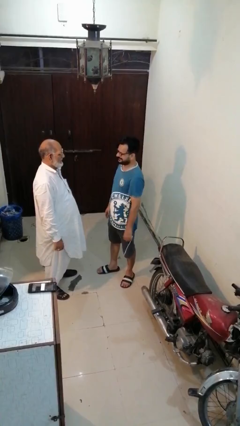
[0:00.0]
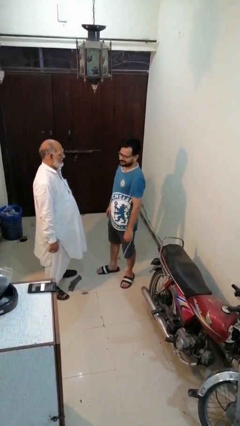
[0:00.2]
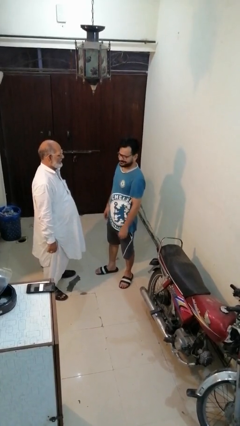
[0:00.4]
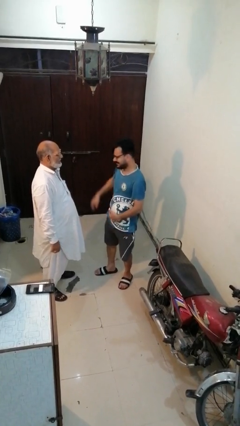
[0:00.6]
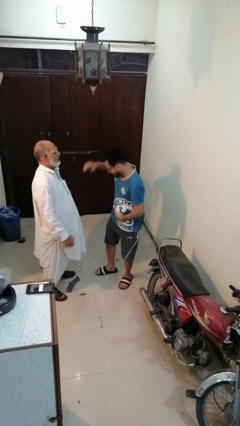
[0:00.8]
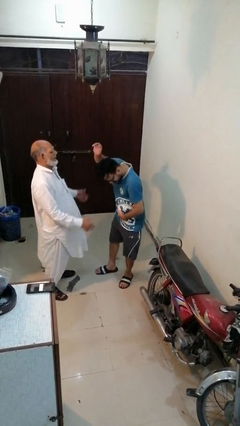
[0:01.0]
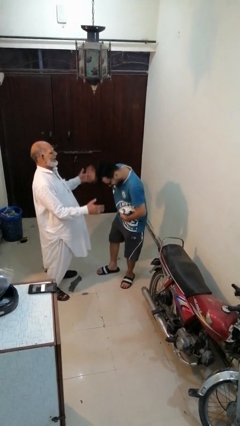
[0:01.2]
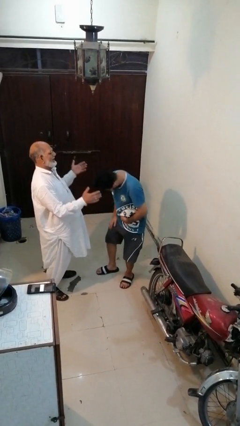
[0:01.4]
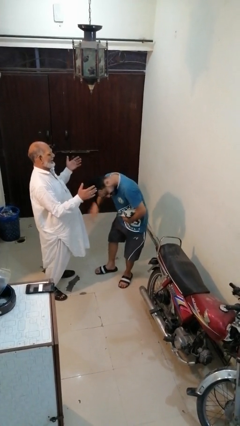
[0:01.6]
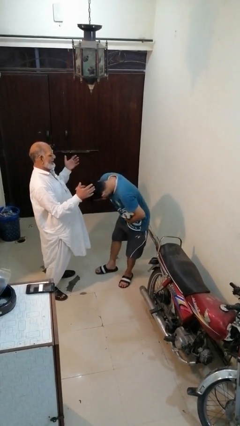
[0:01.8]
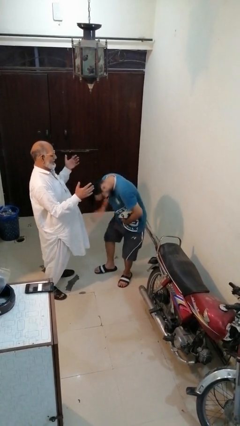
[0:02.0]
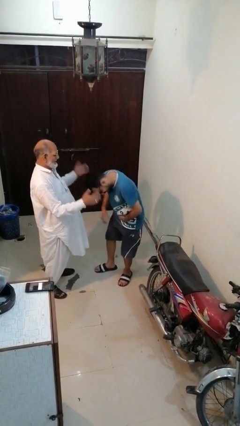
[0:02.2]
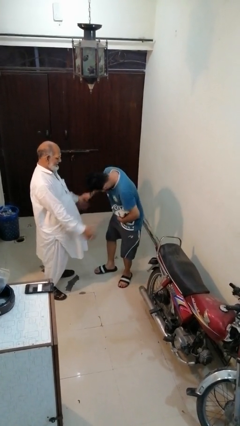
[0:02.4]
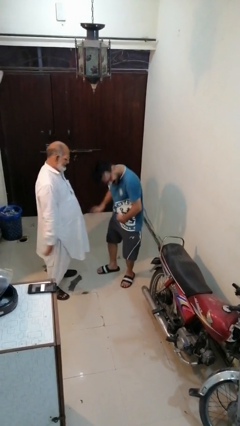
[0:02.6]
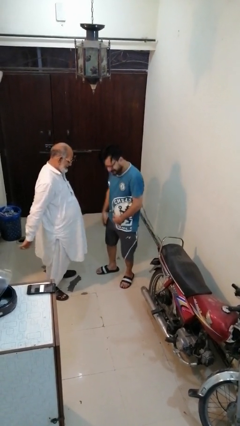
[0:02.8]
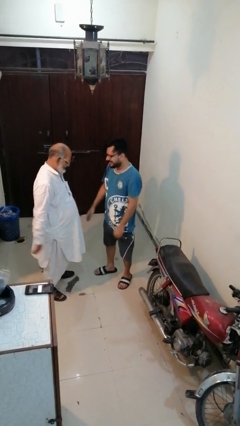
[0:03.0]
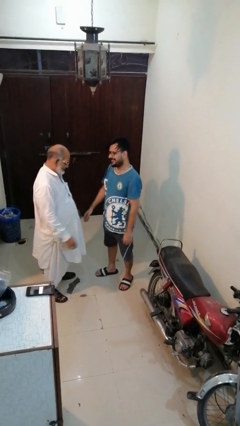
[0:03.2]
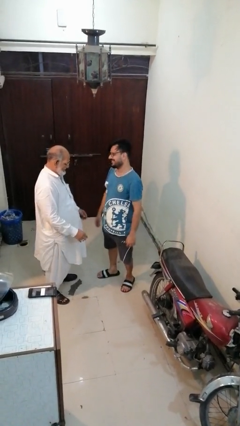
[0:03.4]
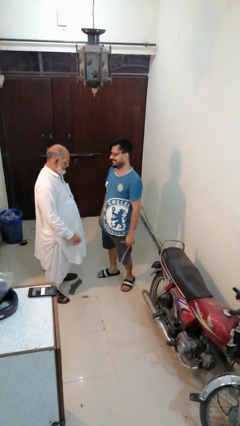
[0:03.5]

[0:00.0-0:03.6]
person laughs with person

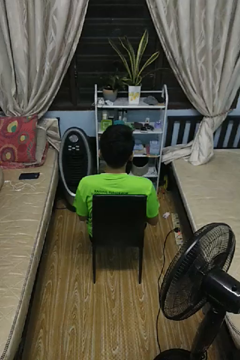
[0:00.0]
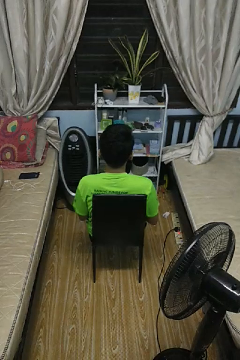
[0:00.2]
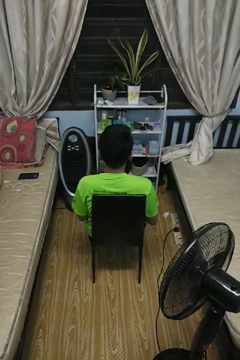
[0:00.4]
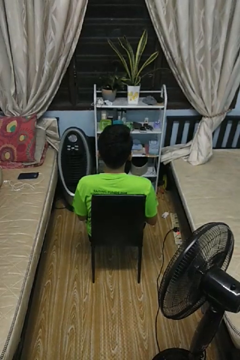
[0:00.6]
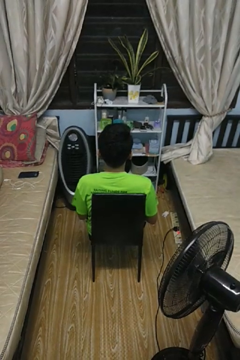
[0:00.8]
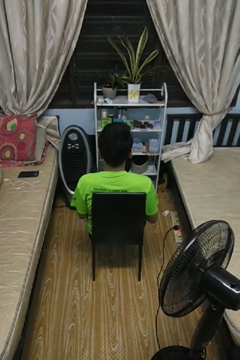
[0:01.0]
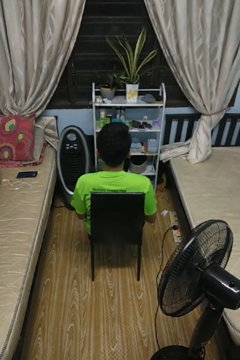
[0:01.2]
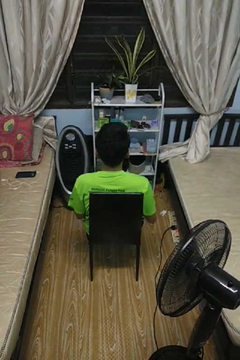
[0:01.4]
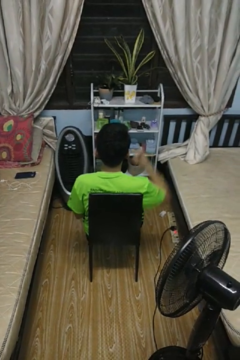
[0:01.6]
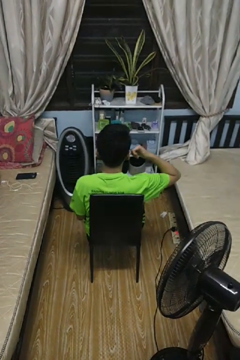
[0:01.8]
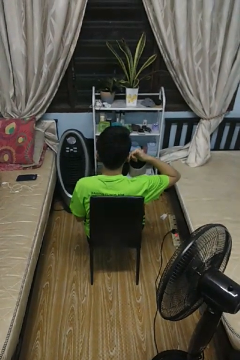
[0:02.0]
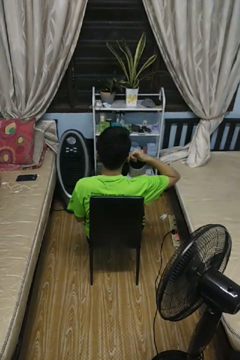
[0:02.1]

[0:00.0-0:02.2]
person gestures call me

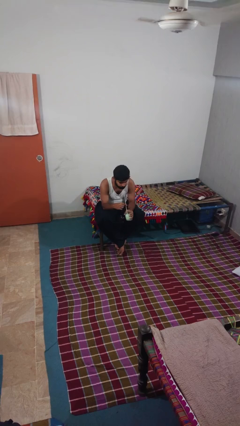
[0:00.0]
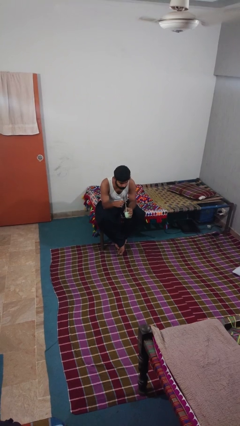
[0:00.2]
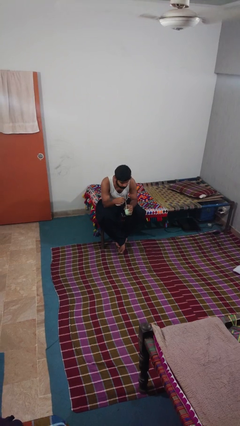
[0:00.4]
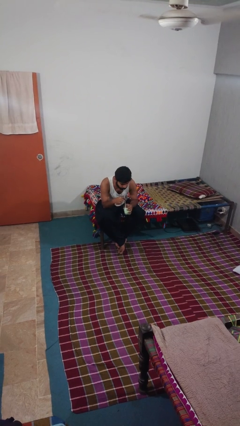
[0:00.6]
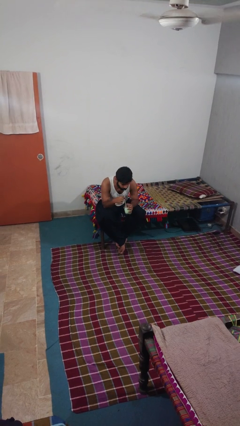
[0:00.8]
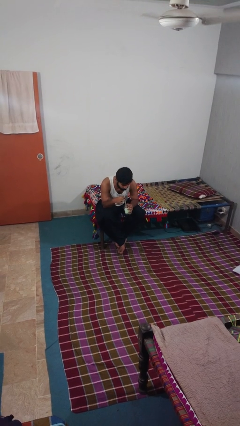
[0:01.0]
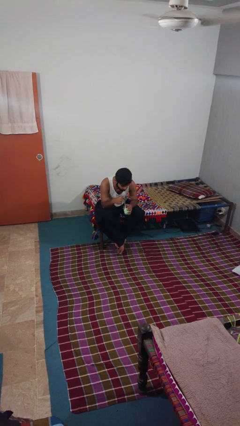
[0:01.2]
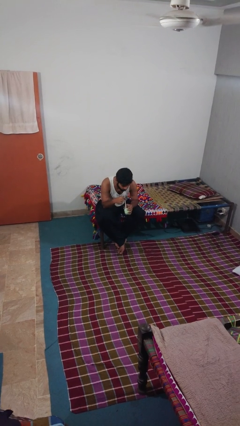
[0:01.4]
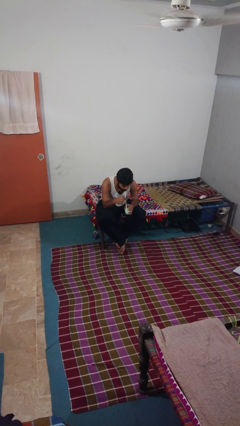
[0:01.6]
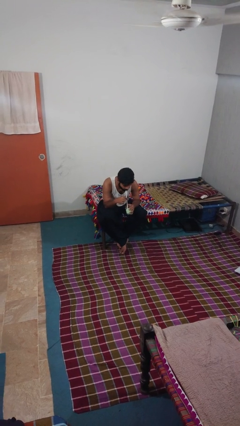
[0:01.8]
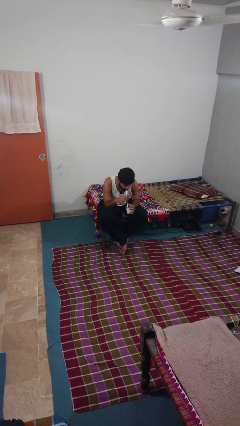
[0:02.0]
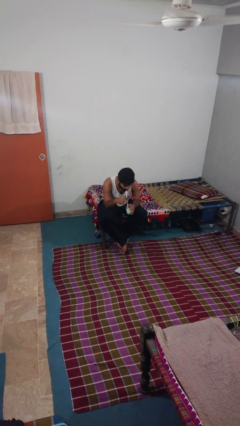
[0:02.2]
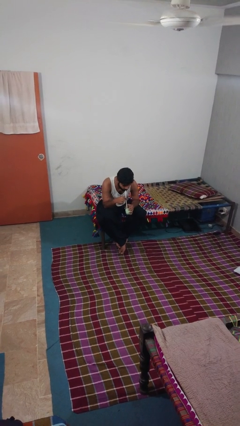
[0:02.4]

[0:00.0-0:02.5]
person drinks from straw

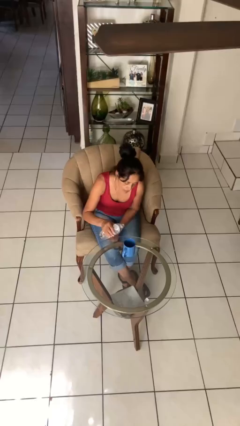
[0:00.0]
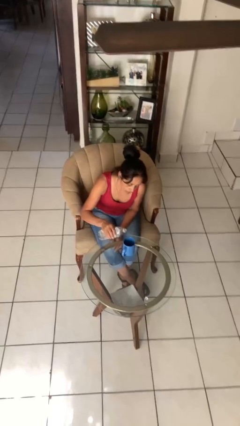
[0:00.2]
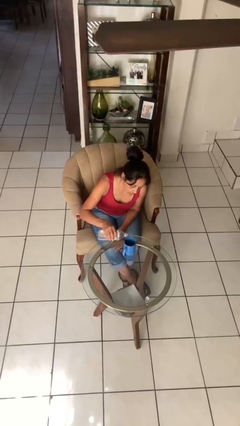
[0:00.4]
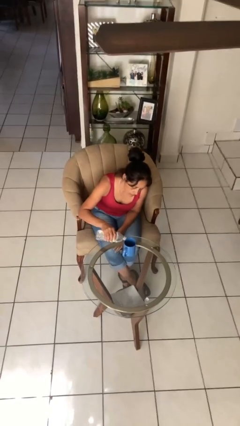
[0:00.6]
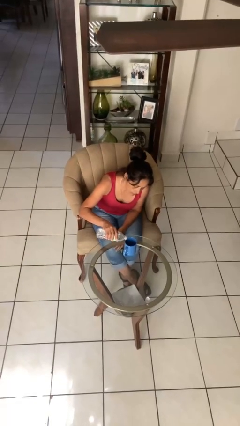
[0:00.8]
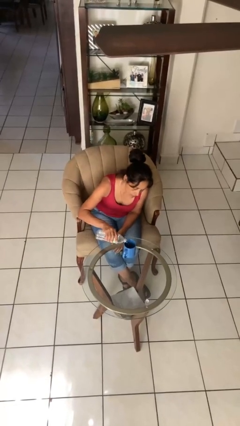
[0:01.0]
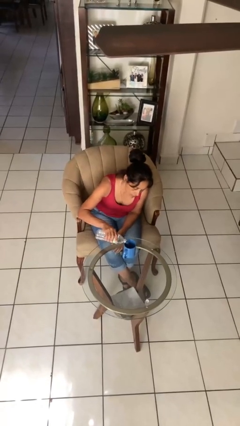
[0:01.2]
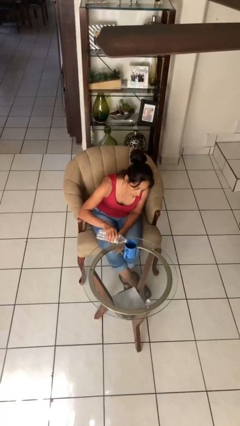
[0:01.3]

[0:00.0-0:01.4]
person pours liquid into cup

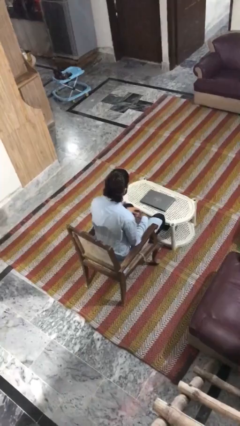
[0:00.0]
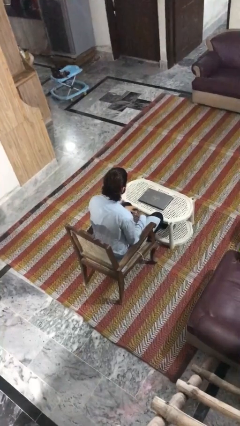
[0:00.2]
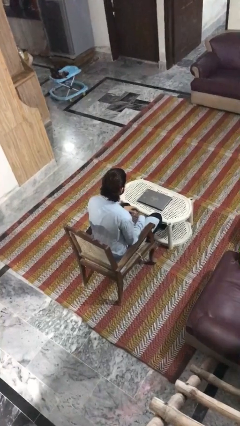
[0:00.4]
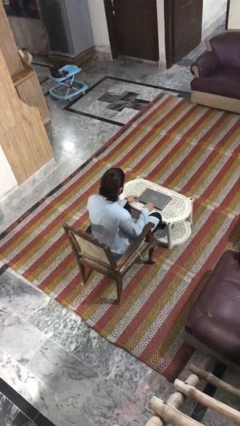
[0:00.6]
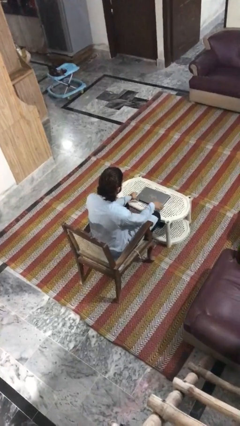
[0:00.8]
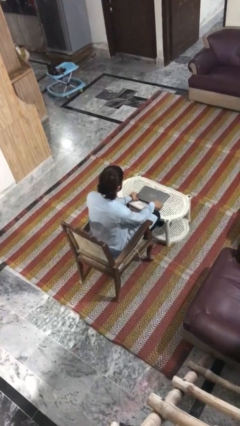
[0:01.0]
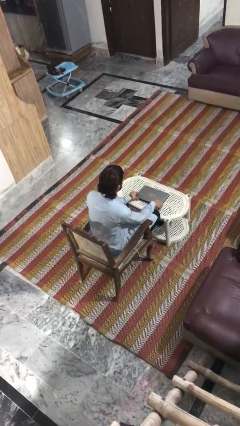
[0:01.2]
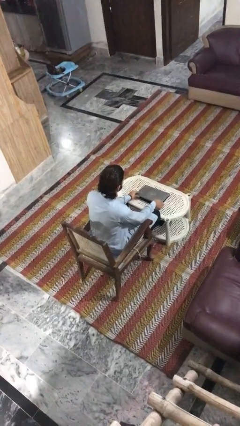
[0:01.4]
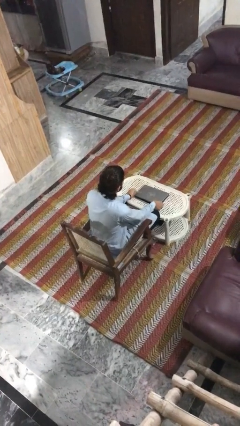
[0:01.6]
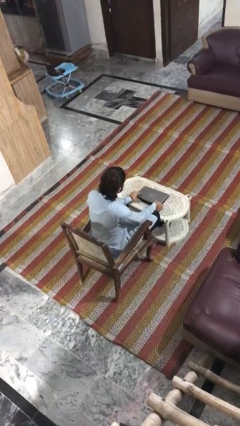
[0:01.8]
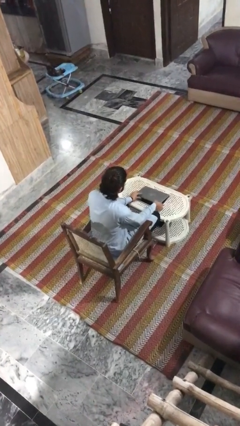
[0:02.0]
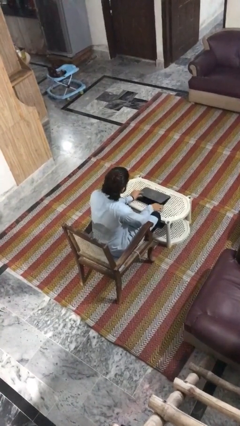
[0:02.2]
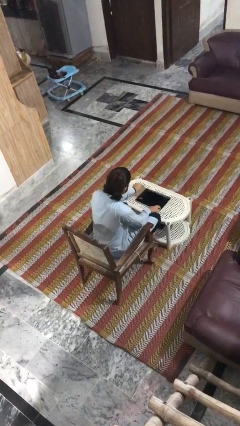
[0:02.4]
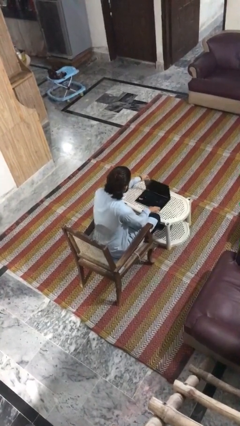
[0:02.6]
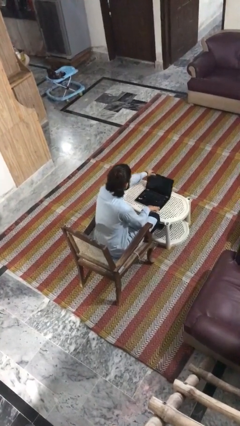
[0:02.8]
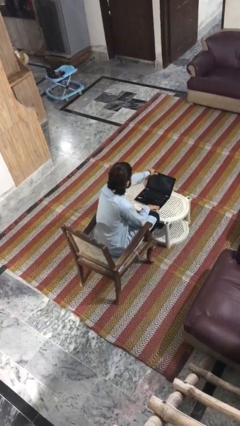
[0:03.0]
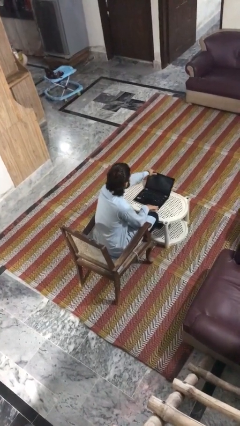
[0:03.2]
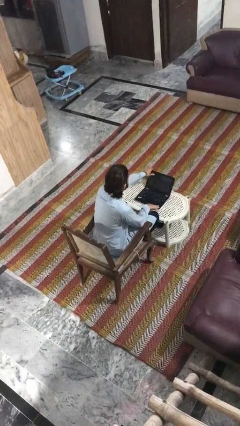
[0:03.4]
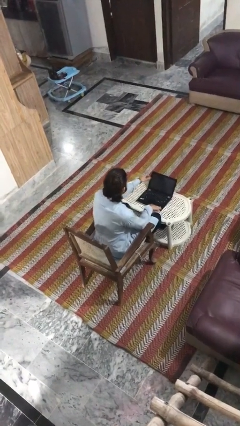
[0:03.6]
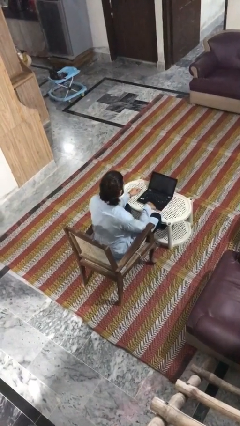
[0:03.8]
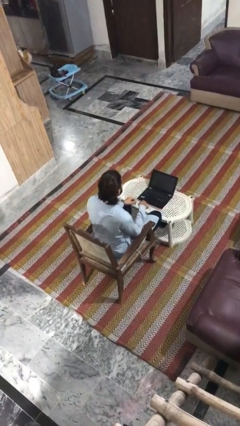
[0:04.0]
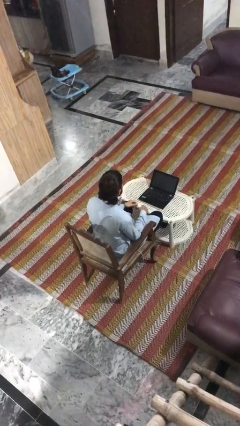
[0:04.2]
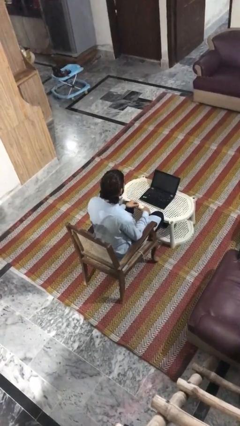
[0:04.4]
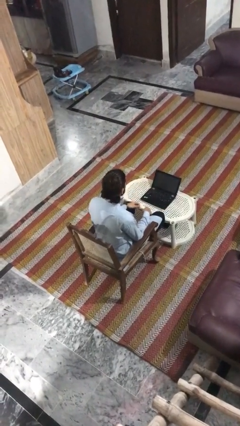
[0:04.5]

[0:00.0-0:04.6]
person opens laptop

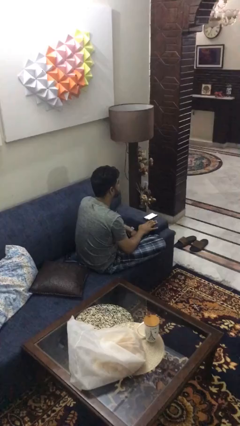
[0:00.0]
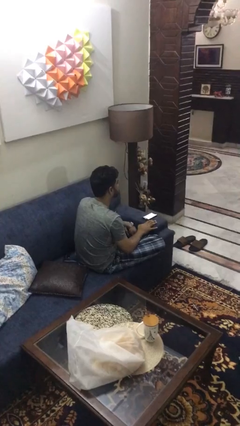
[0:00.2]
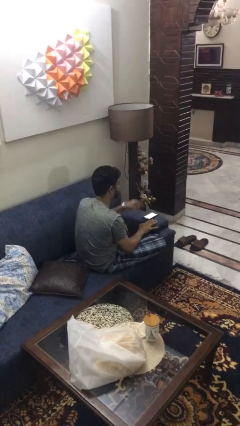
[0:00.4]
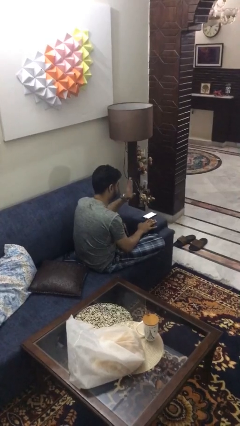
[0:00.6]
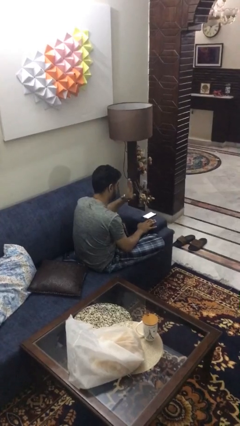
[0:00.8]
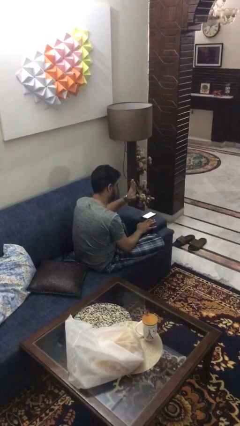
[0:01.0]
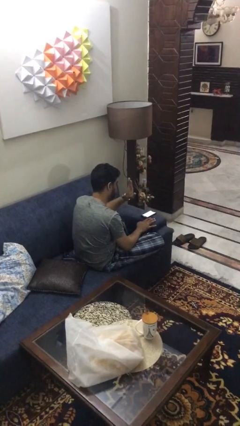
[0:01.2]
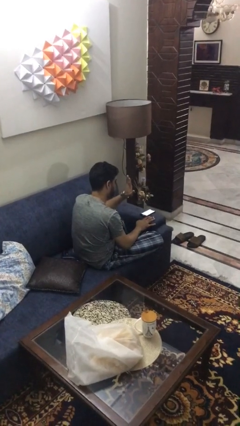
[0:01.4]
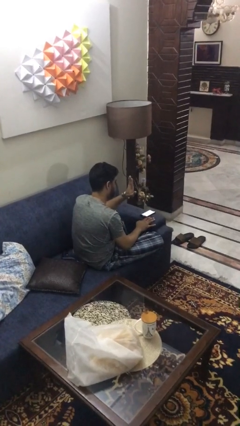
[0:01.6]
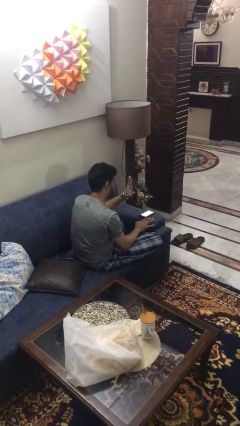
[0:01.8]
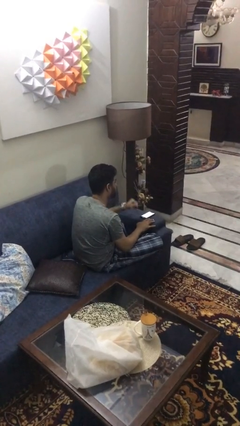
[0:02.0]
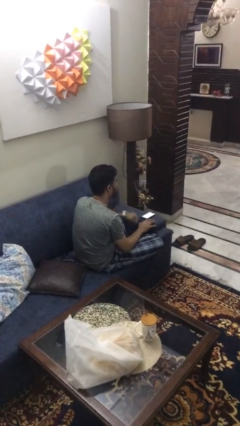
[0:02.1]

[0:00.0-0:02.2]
person gestures stop

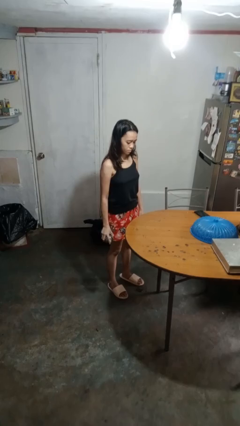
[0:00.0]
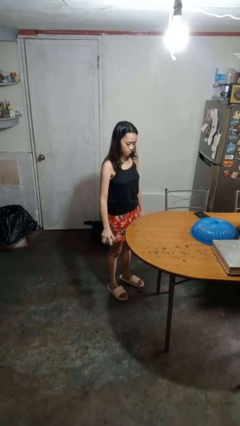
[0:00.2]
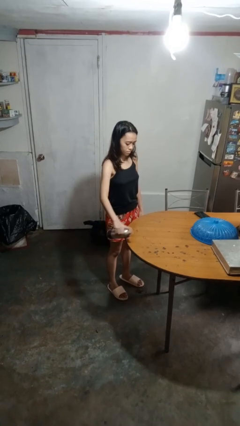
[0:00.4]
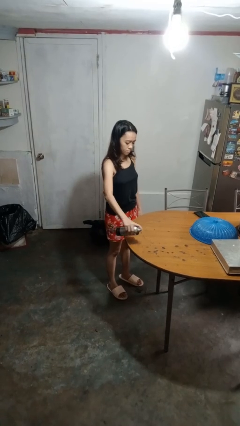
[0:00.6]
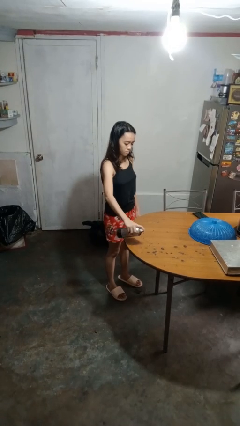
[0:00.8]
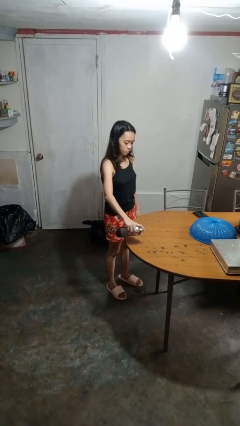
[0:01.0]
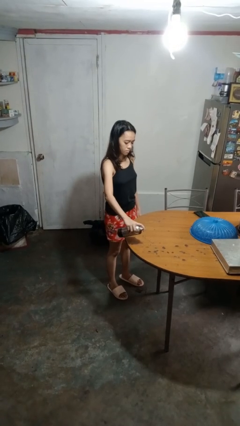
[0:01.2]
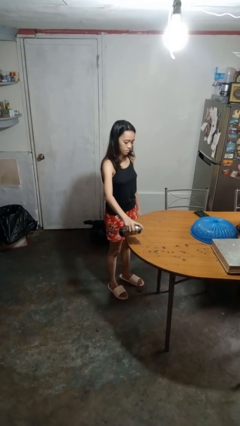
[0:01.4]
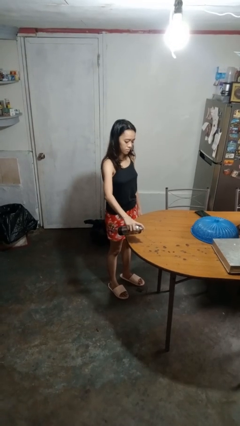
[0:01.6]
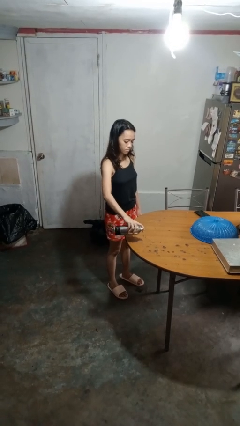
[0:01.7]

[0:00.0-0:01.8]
person sprays from bottle
